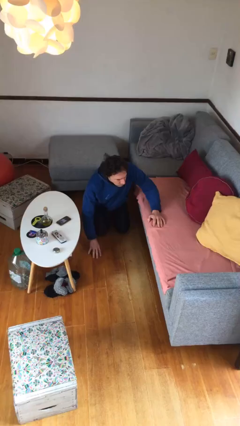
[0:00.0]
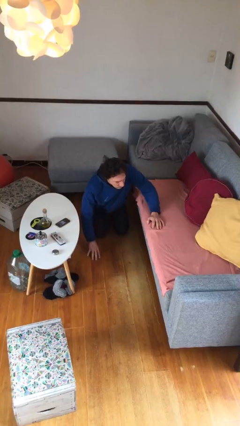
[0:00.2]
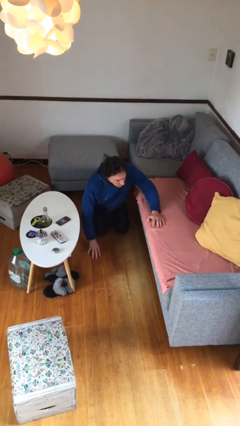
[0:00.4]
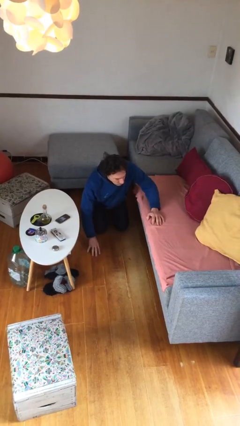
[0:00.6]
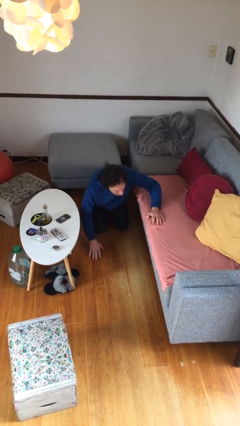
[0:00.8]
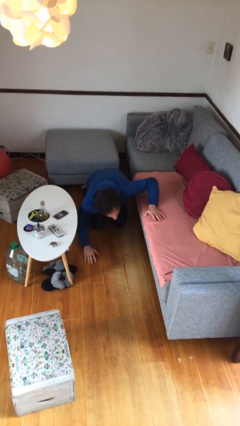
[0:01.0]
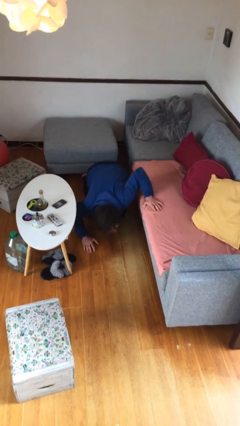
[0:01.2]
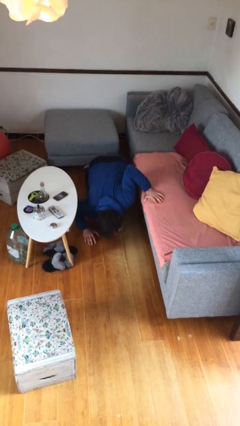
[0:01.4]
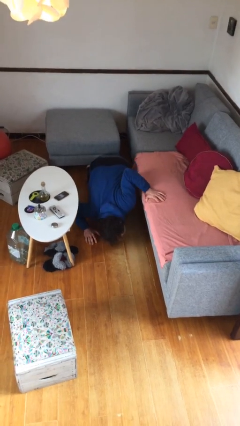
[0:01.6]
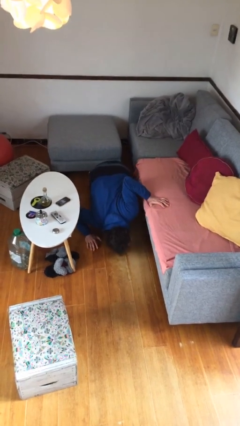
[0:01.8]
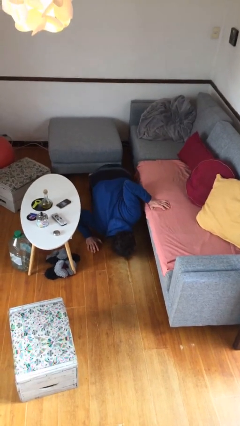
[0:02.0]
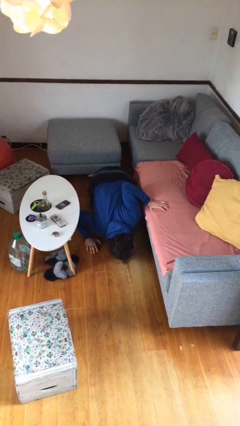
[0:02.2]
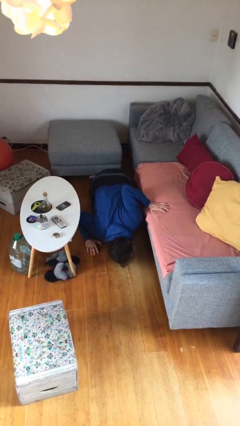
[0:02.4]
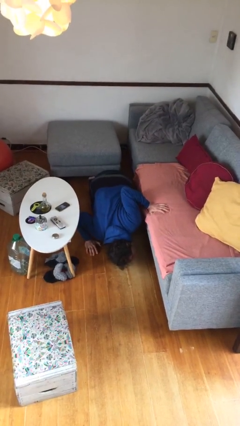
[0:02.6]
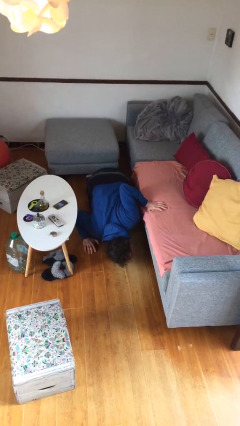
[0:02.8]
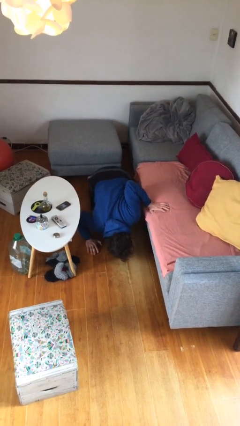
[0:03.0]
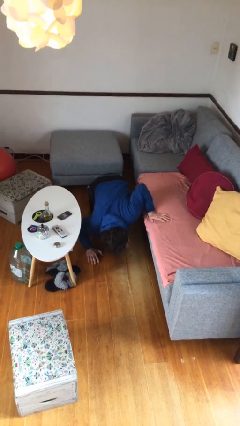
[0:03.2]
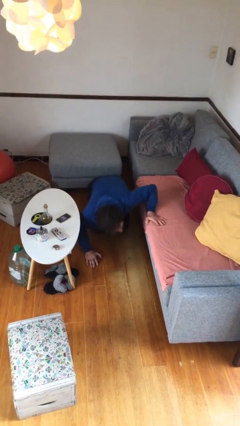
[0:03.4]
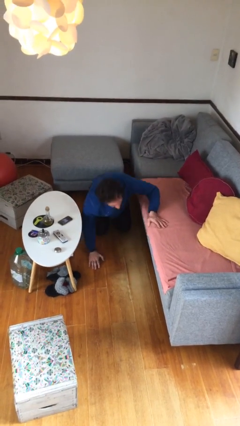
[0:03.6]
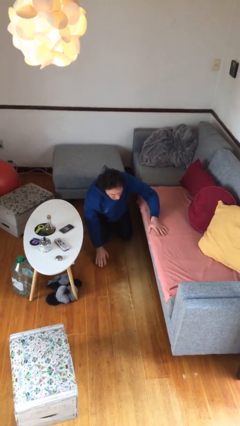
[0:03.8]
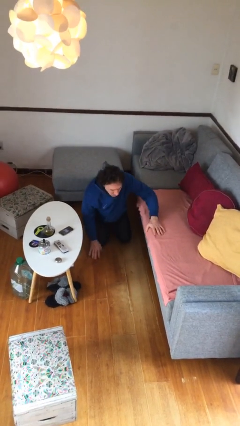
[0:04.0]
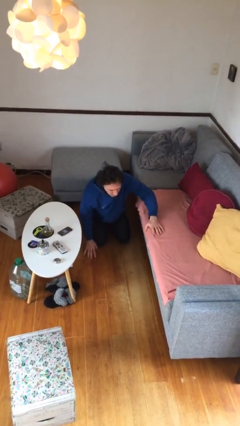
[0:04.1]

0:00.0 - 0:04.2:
person searches under couch

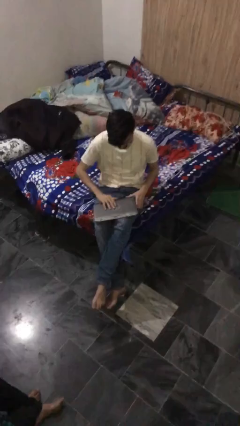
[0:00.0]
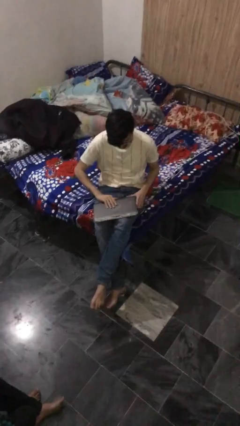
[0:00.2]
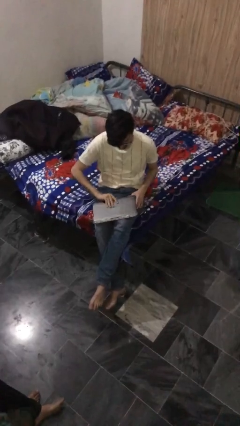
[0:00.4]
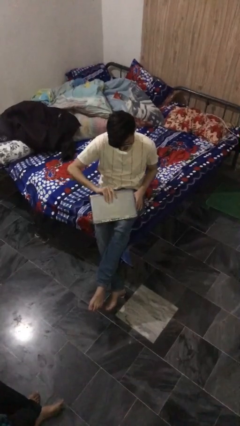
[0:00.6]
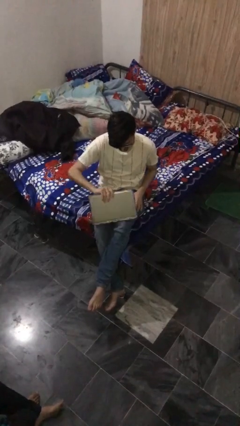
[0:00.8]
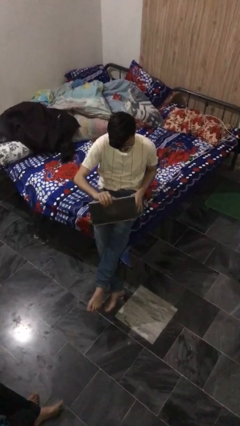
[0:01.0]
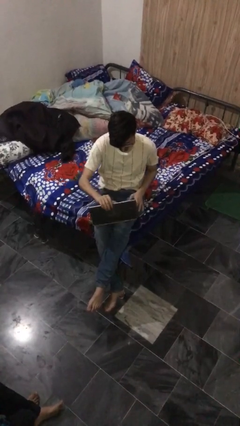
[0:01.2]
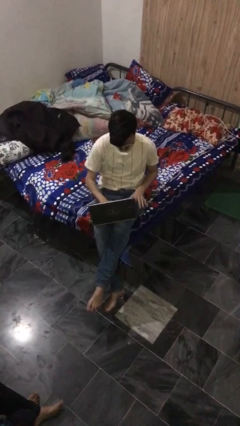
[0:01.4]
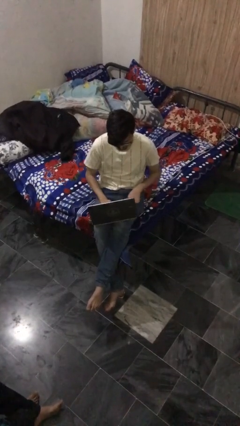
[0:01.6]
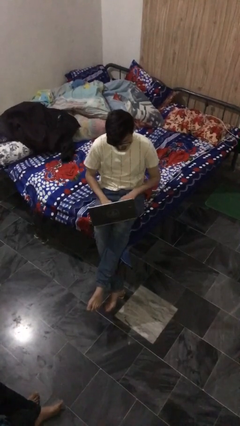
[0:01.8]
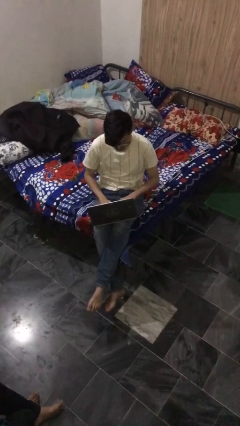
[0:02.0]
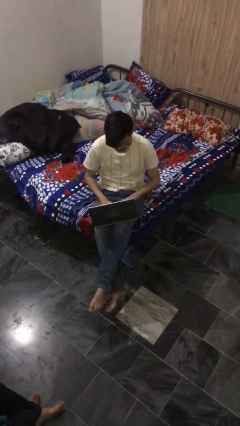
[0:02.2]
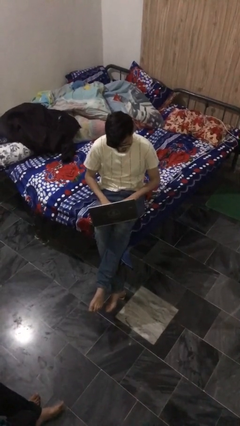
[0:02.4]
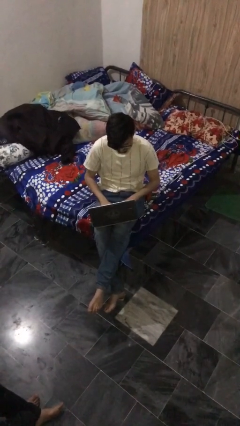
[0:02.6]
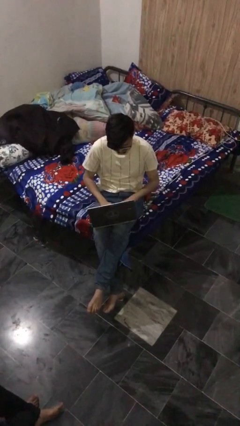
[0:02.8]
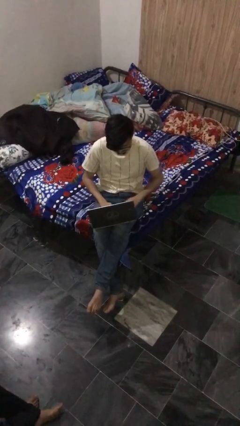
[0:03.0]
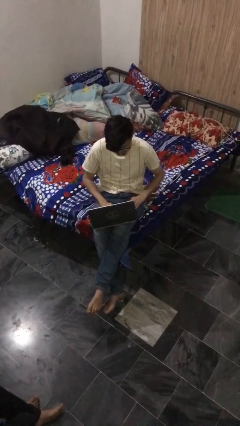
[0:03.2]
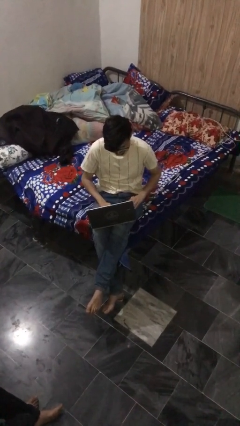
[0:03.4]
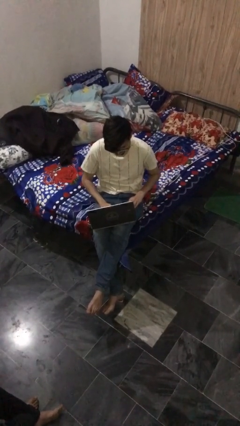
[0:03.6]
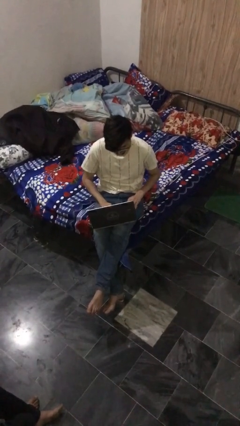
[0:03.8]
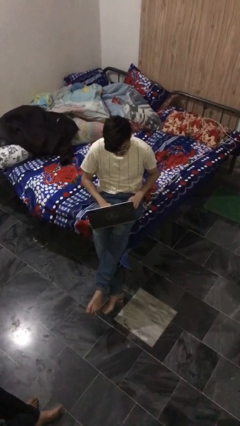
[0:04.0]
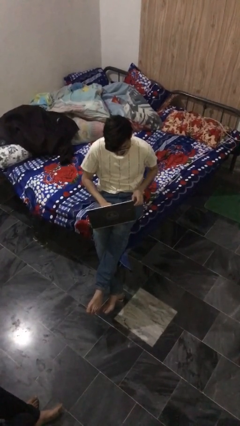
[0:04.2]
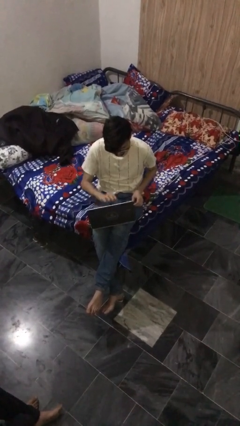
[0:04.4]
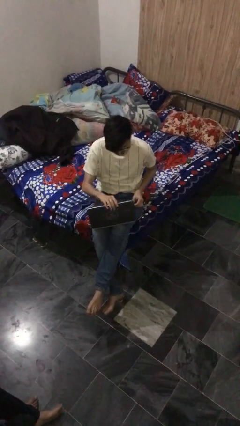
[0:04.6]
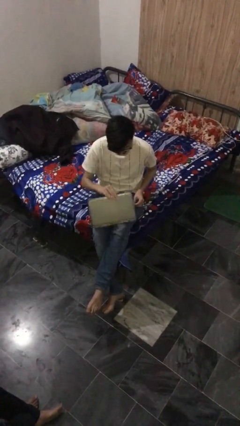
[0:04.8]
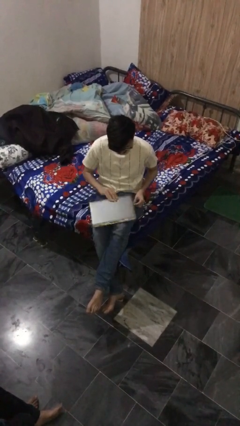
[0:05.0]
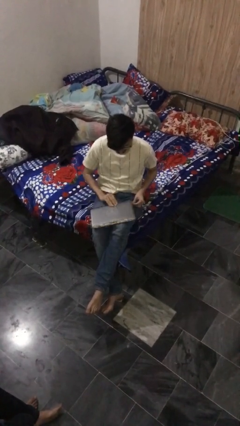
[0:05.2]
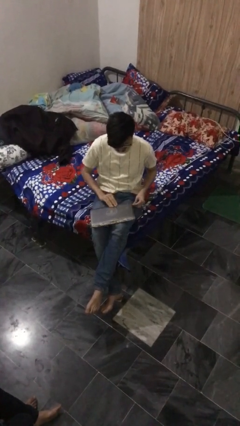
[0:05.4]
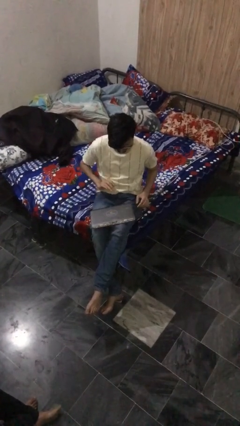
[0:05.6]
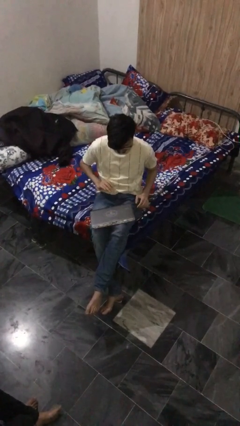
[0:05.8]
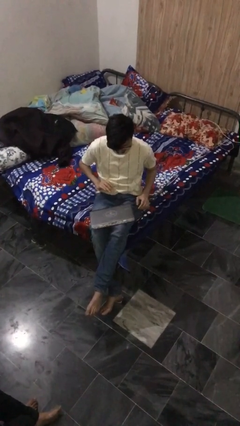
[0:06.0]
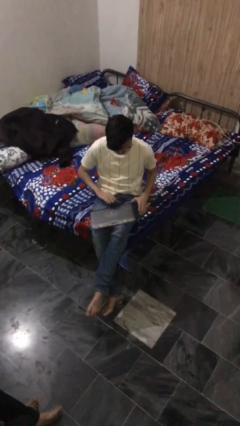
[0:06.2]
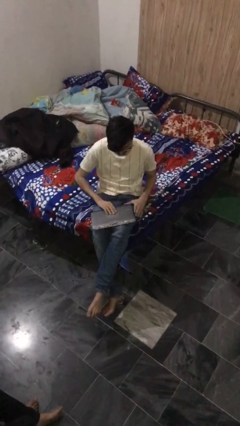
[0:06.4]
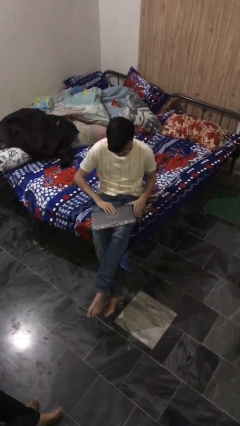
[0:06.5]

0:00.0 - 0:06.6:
person interacts with laptop

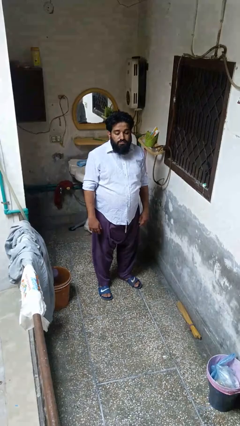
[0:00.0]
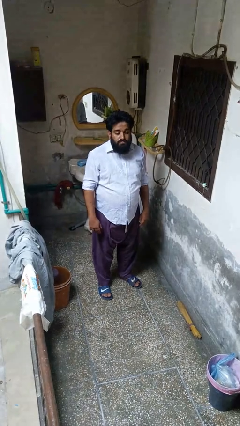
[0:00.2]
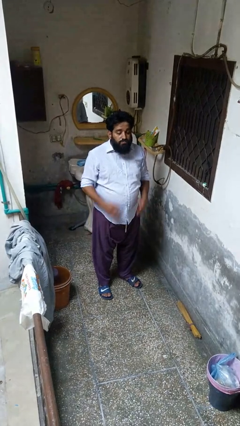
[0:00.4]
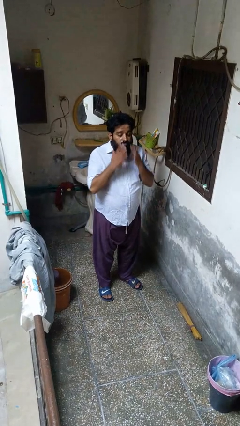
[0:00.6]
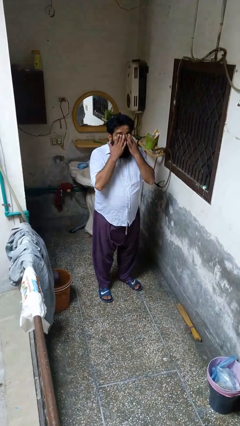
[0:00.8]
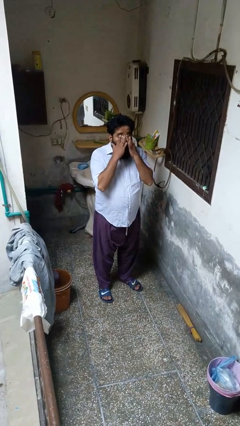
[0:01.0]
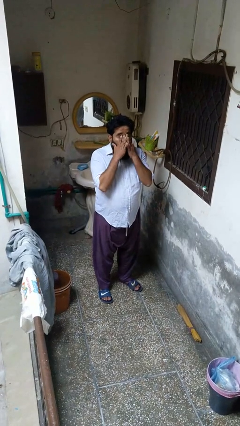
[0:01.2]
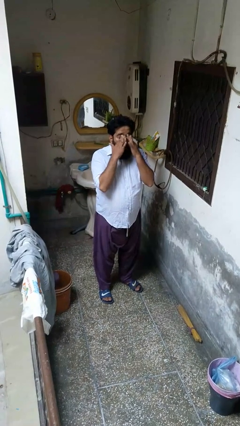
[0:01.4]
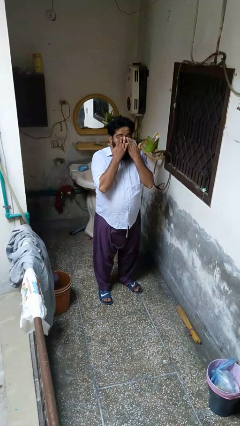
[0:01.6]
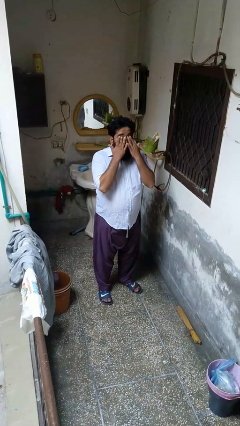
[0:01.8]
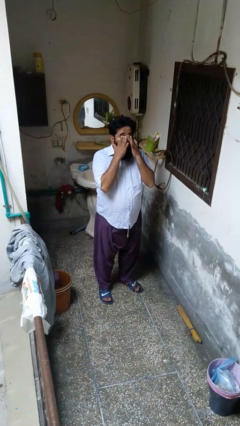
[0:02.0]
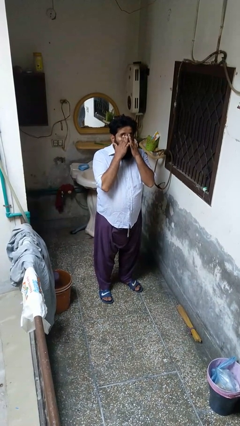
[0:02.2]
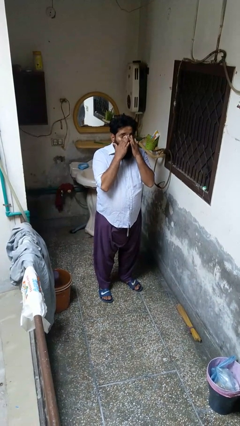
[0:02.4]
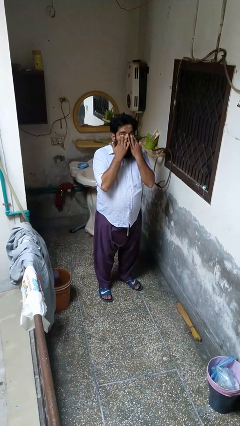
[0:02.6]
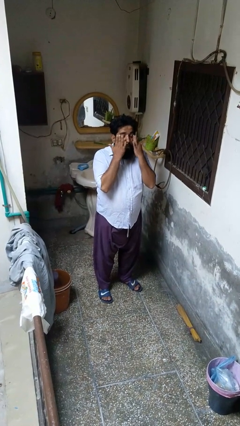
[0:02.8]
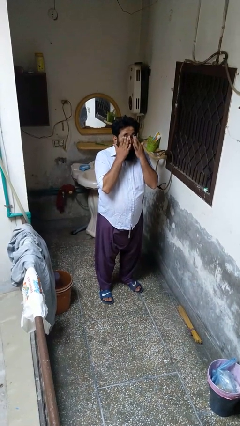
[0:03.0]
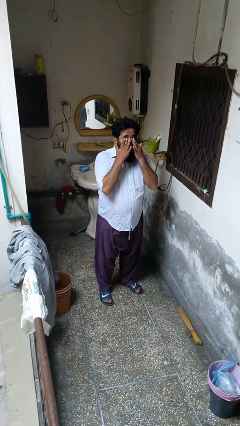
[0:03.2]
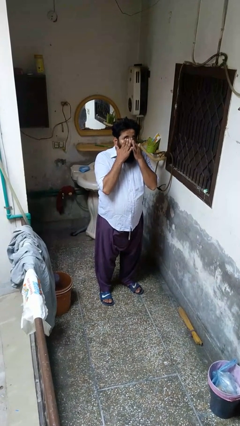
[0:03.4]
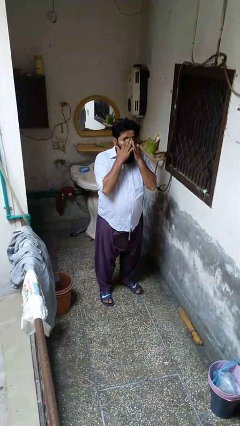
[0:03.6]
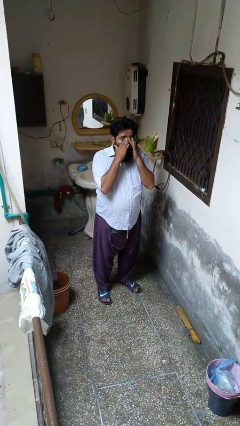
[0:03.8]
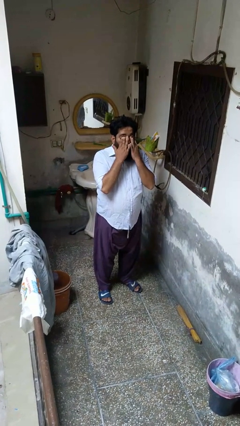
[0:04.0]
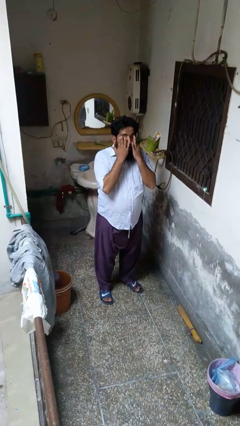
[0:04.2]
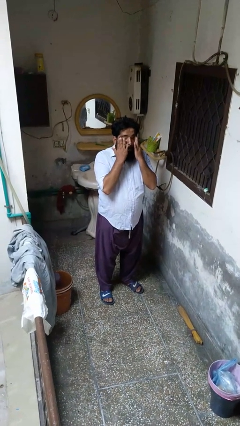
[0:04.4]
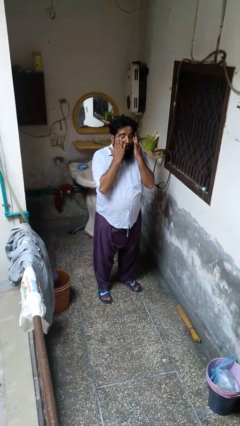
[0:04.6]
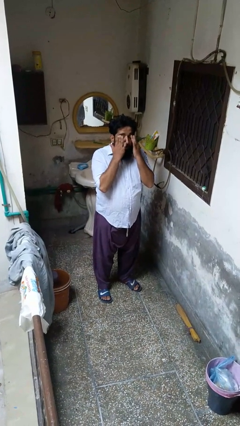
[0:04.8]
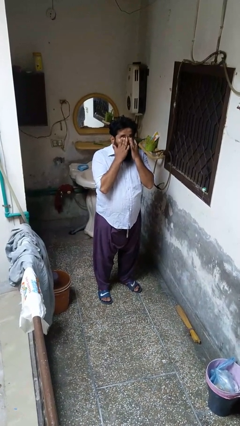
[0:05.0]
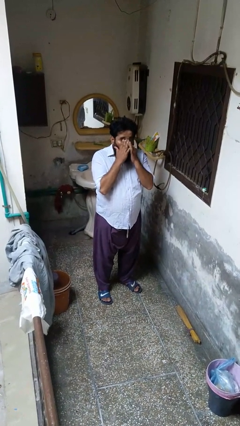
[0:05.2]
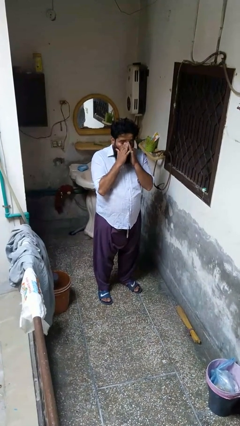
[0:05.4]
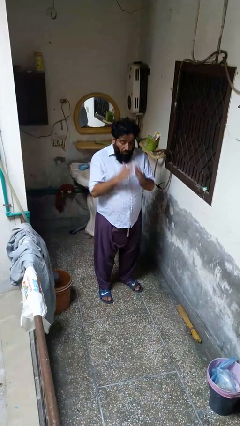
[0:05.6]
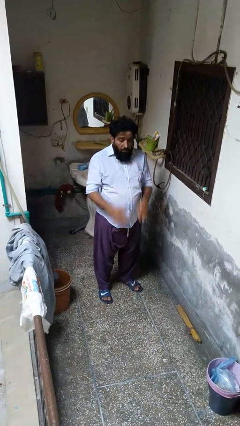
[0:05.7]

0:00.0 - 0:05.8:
person rubs eyes

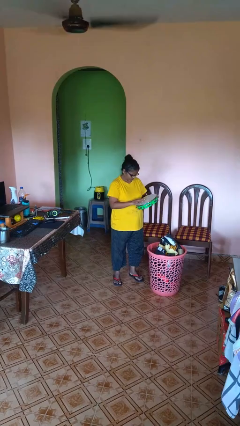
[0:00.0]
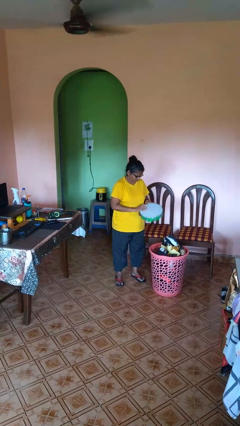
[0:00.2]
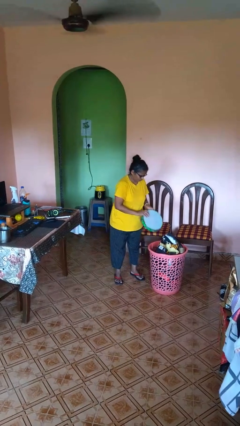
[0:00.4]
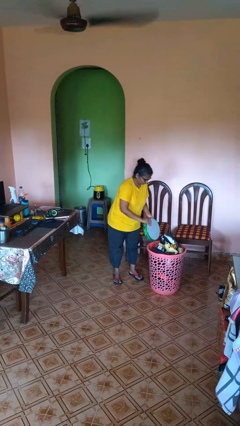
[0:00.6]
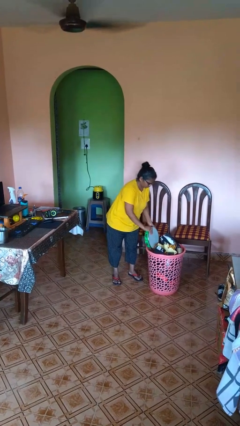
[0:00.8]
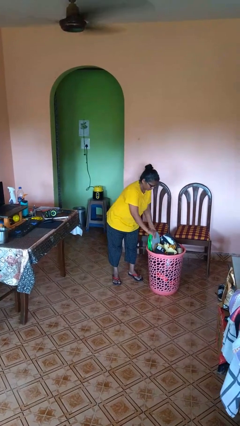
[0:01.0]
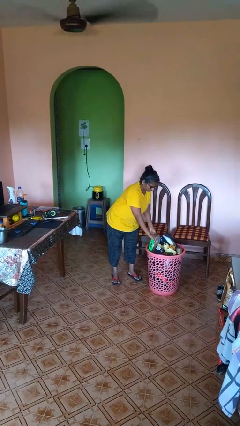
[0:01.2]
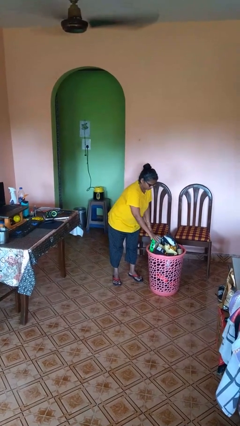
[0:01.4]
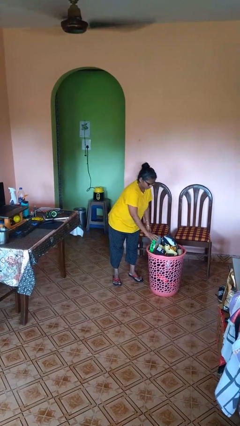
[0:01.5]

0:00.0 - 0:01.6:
person puts object into basket
